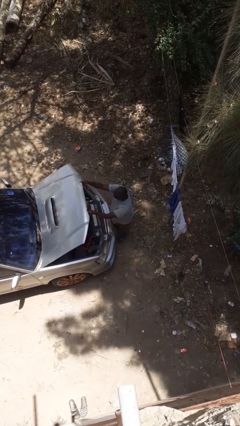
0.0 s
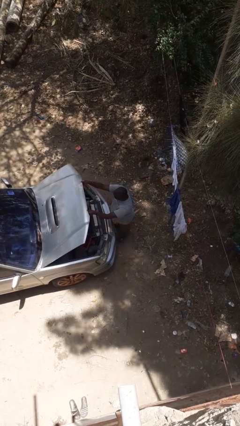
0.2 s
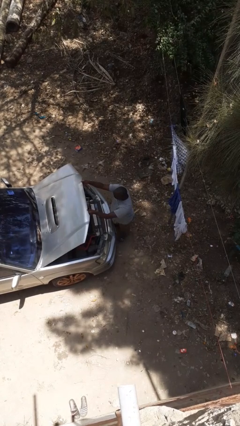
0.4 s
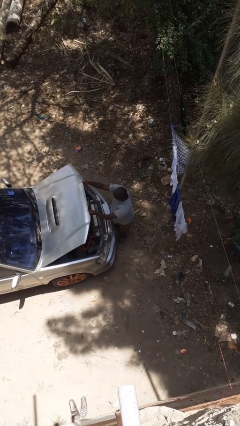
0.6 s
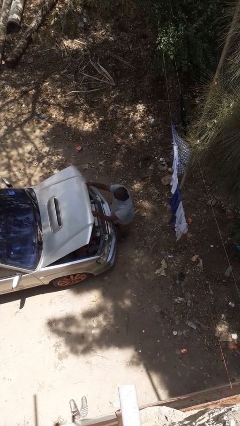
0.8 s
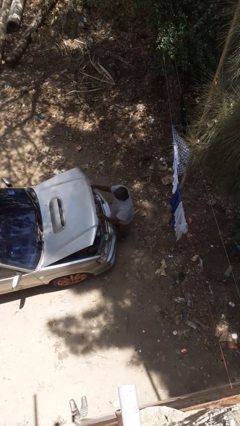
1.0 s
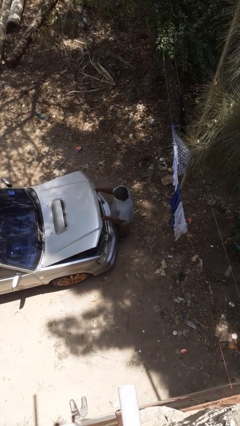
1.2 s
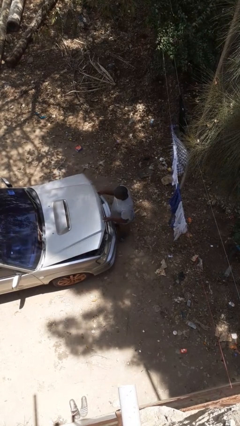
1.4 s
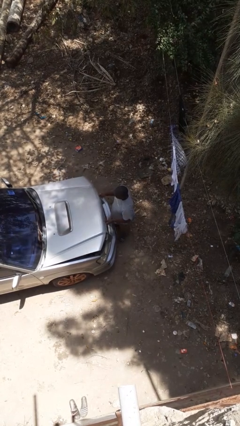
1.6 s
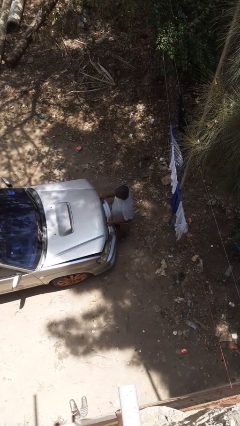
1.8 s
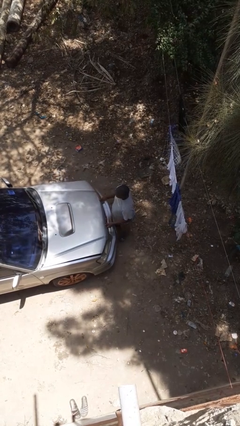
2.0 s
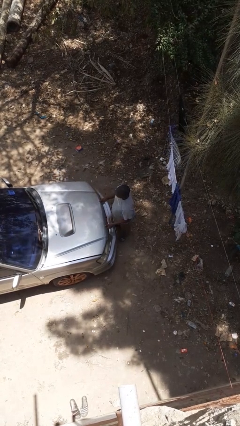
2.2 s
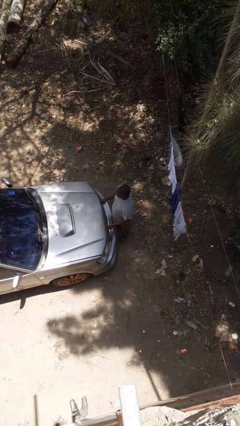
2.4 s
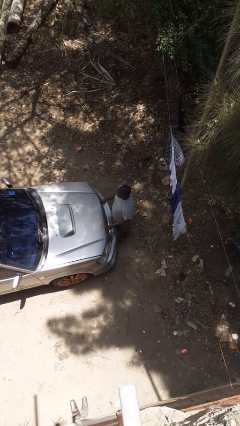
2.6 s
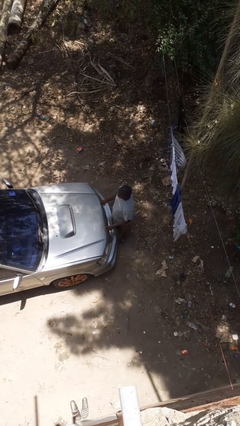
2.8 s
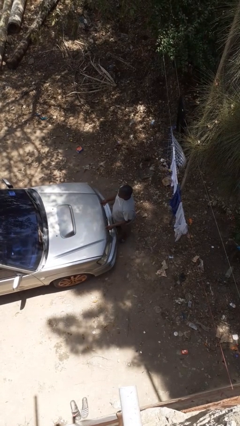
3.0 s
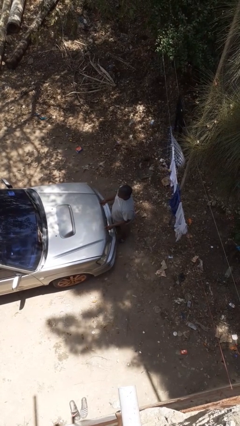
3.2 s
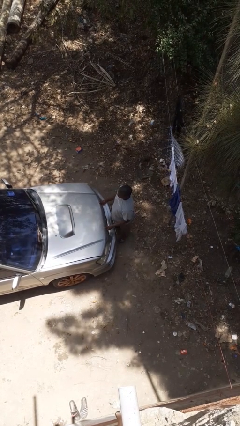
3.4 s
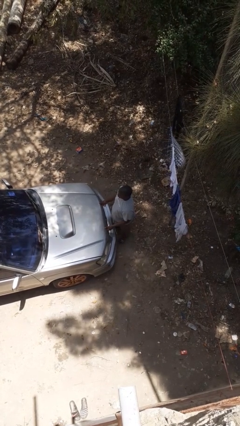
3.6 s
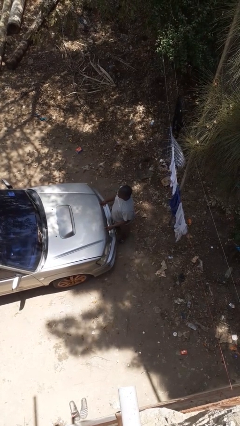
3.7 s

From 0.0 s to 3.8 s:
person closes car hood

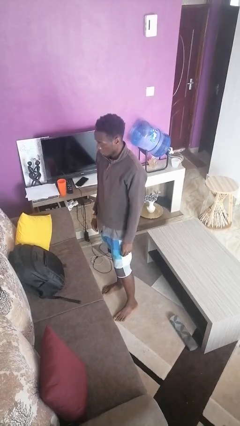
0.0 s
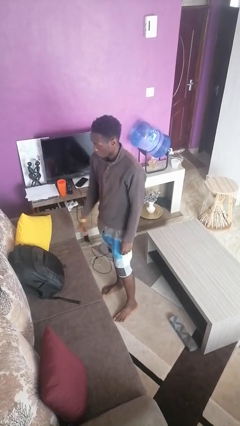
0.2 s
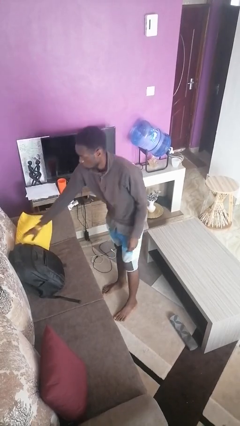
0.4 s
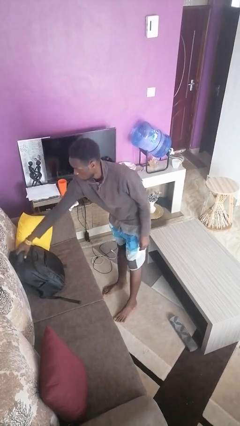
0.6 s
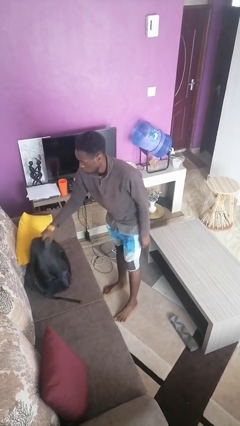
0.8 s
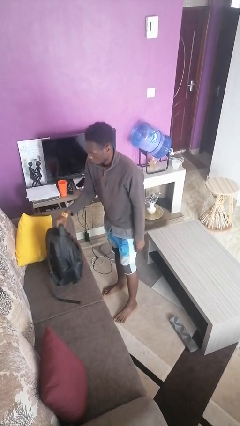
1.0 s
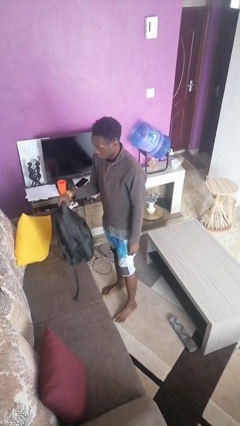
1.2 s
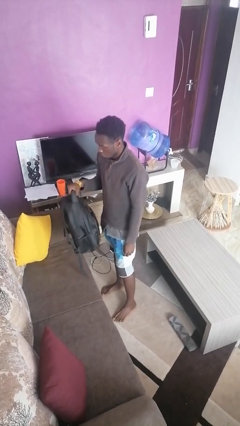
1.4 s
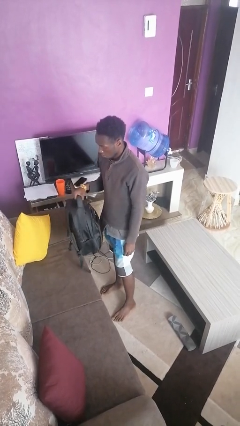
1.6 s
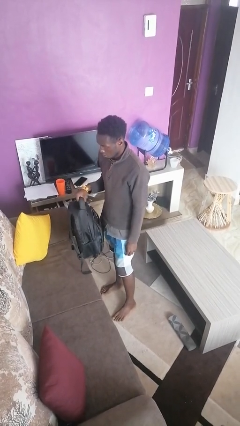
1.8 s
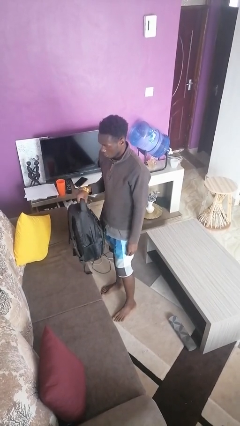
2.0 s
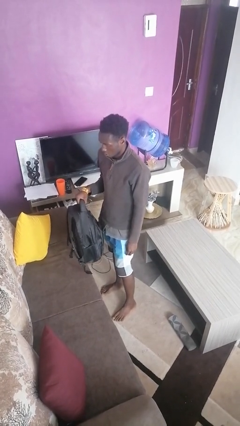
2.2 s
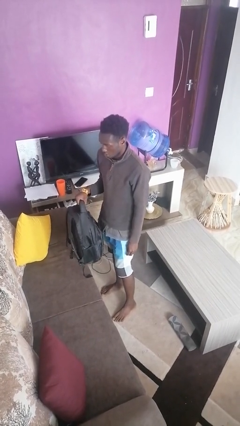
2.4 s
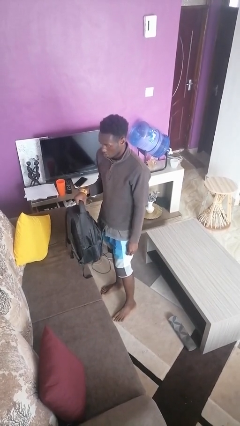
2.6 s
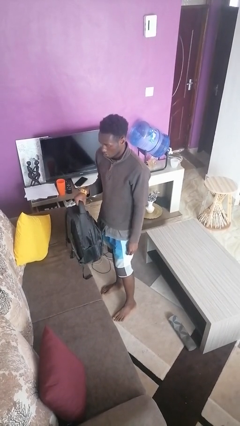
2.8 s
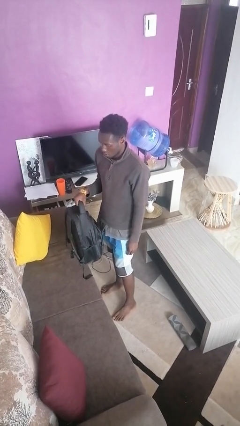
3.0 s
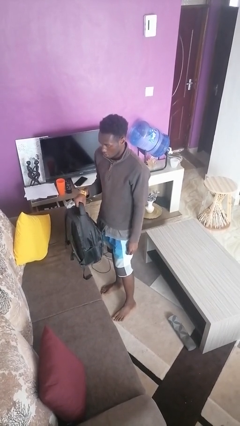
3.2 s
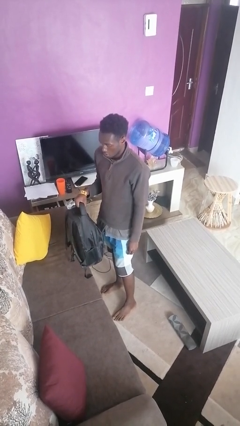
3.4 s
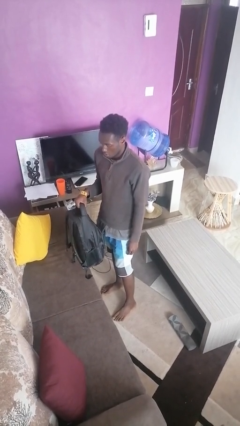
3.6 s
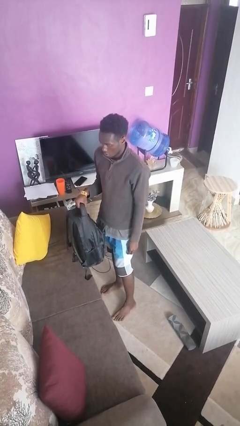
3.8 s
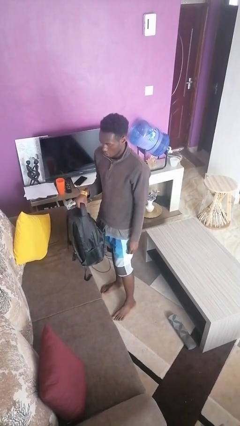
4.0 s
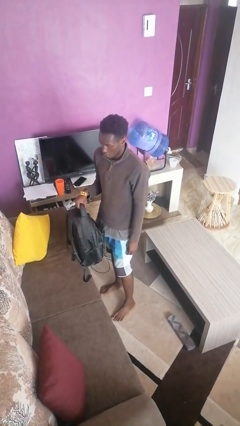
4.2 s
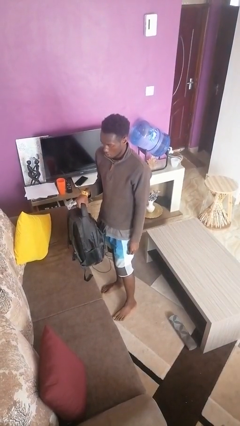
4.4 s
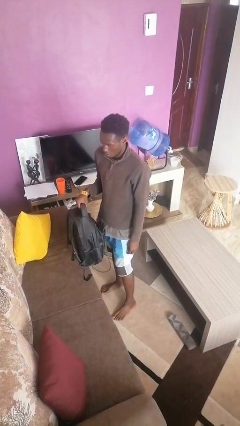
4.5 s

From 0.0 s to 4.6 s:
person picks up object from couch

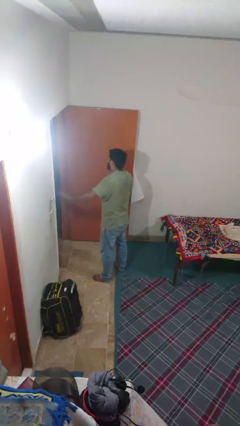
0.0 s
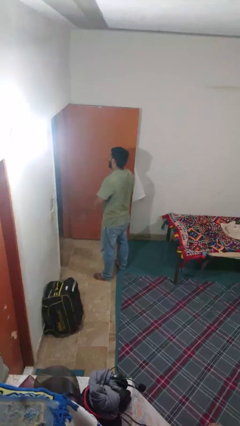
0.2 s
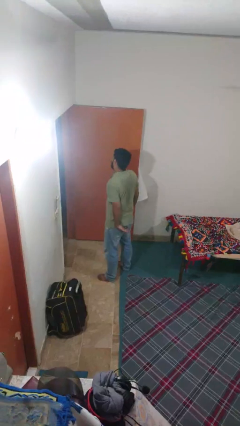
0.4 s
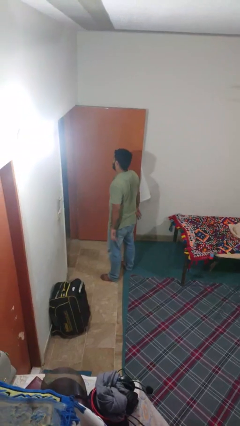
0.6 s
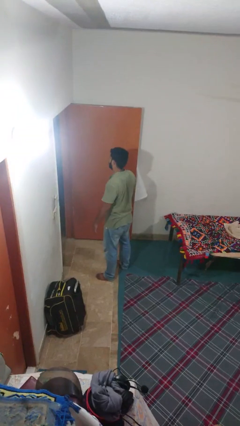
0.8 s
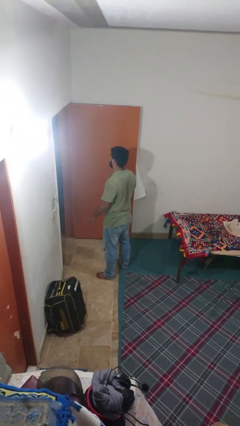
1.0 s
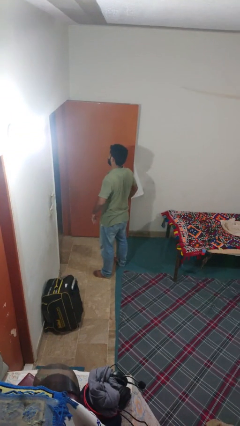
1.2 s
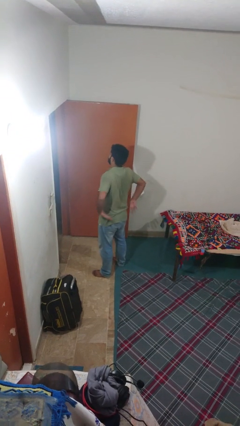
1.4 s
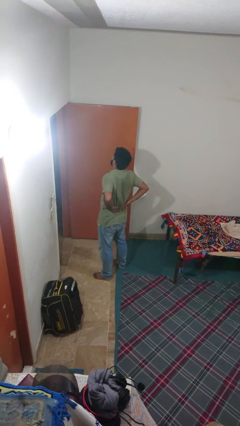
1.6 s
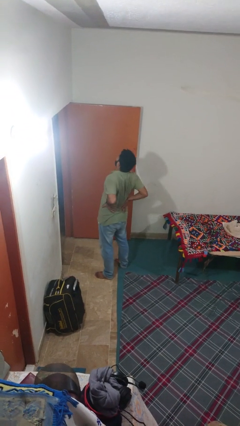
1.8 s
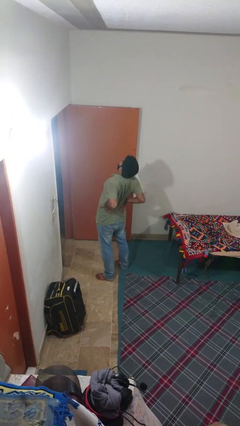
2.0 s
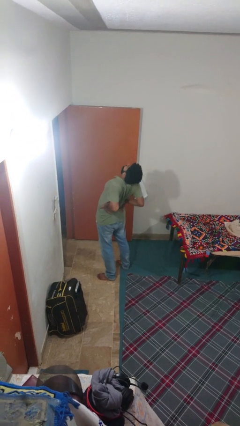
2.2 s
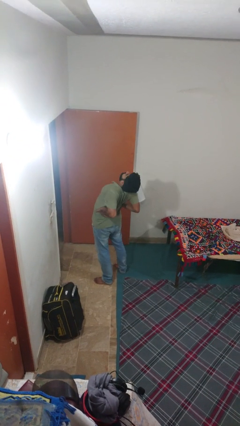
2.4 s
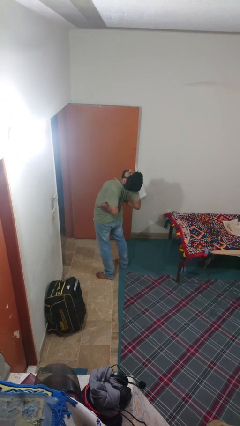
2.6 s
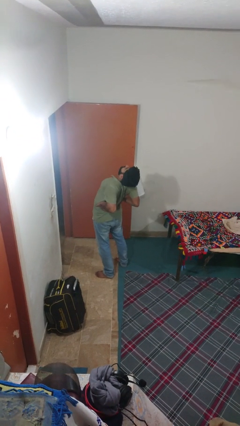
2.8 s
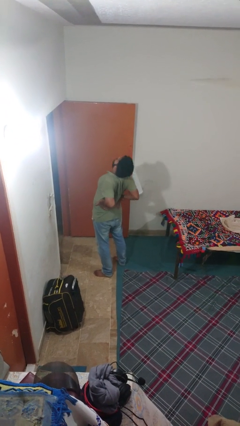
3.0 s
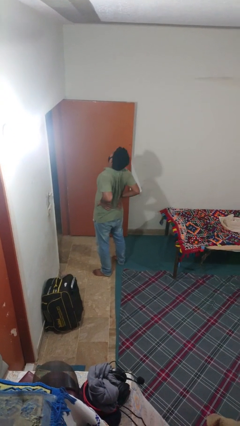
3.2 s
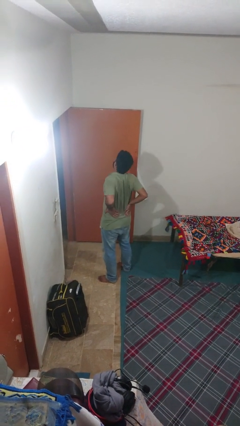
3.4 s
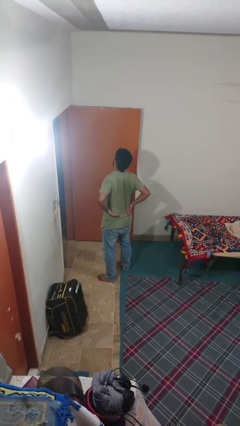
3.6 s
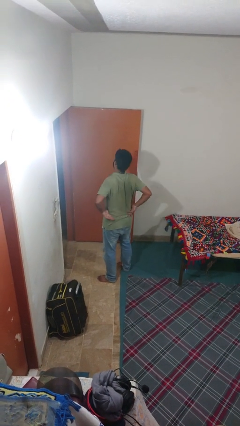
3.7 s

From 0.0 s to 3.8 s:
person stretches back

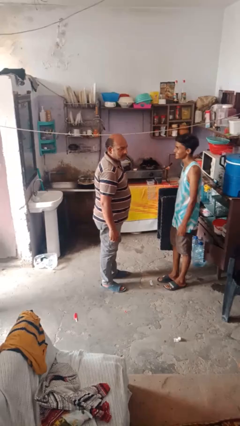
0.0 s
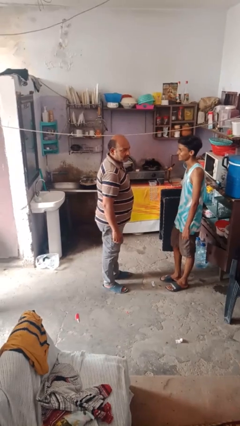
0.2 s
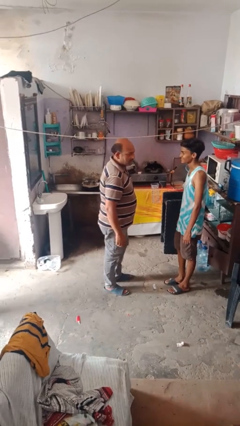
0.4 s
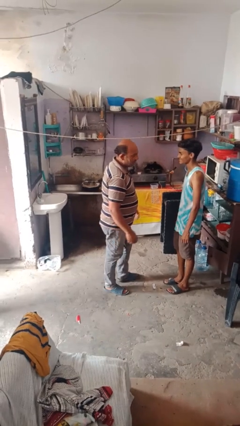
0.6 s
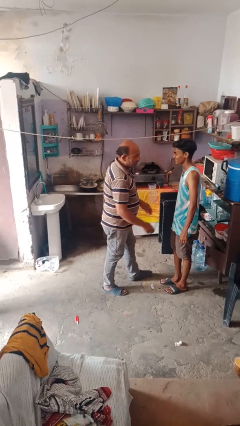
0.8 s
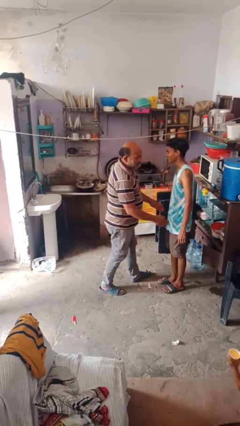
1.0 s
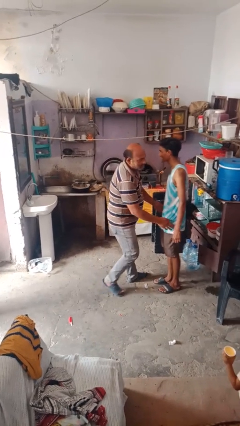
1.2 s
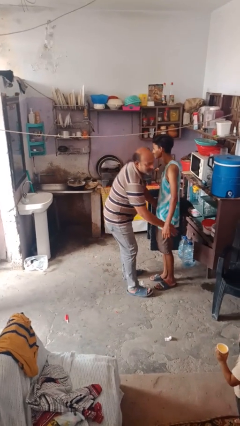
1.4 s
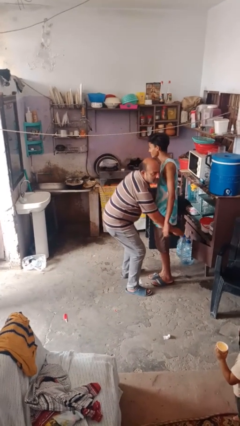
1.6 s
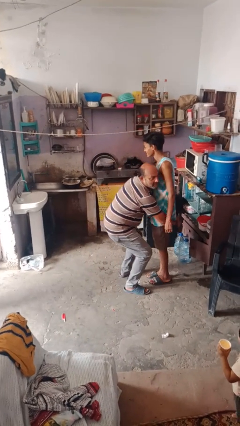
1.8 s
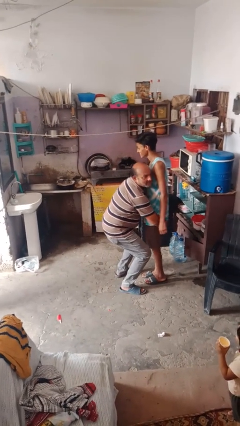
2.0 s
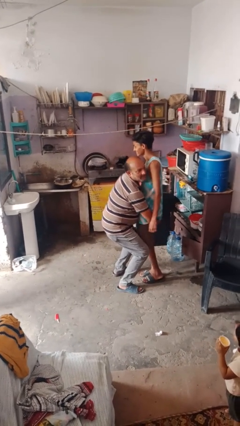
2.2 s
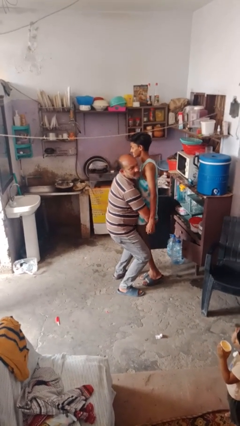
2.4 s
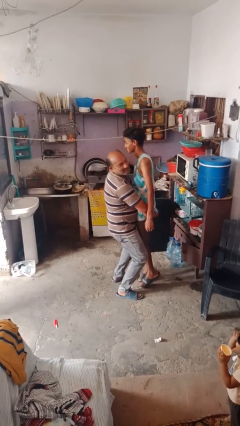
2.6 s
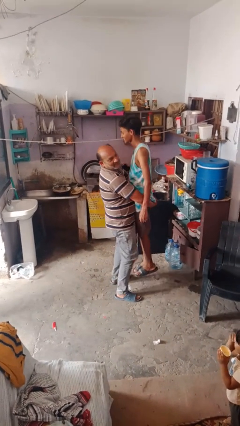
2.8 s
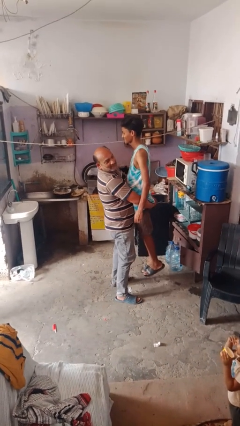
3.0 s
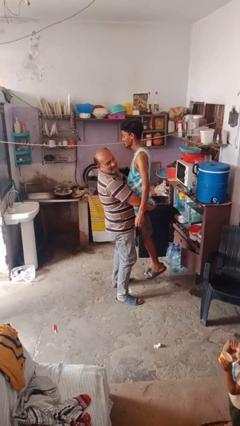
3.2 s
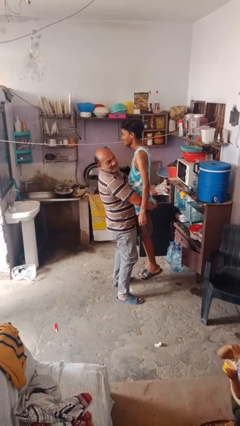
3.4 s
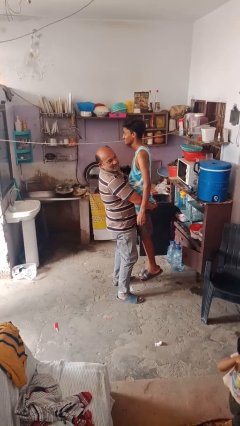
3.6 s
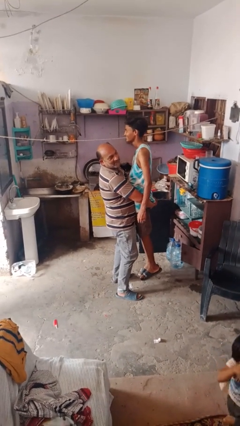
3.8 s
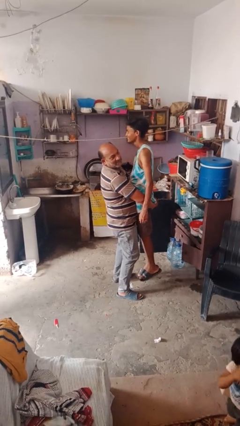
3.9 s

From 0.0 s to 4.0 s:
person picks up person

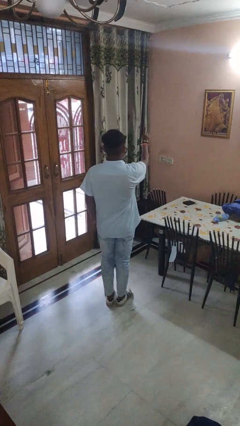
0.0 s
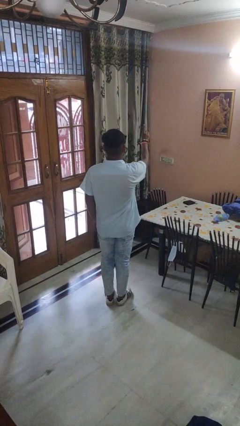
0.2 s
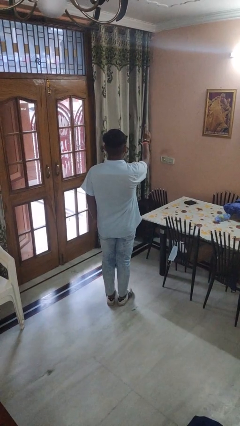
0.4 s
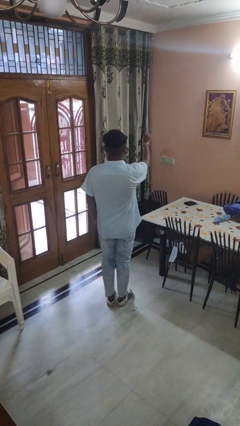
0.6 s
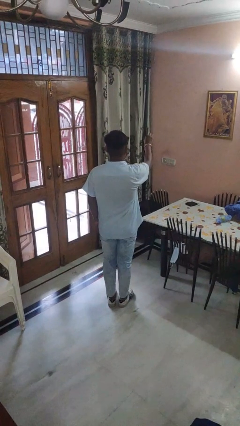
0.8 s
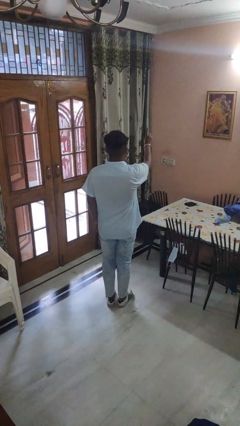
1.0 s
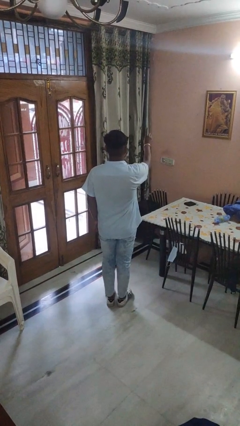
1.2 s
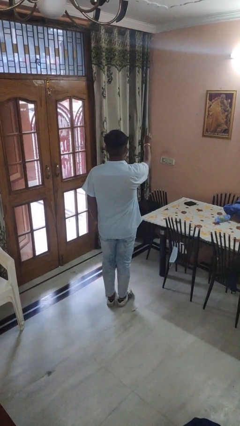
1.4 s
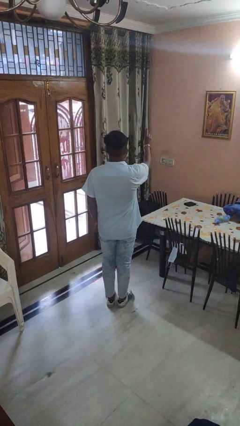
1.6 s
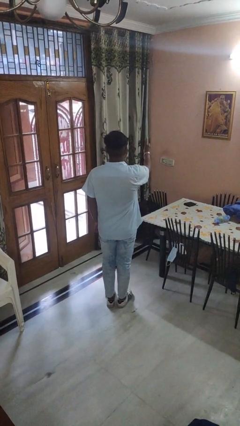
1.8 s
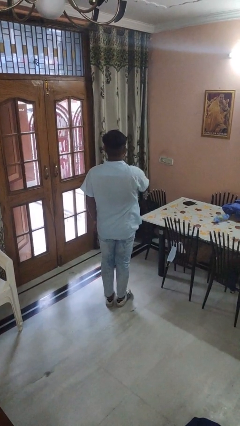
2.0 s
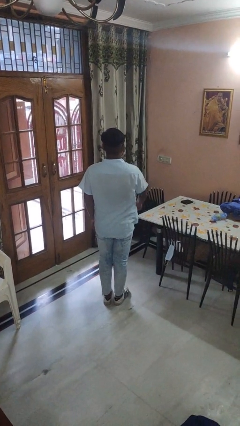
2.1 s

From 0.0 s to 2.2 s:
person gestures number one
